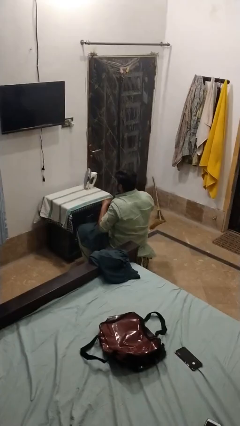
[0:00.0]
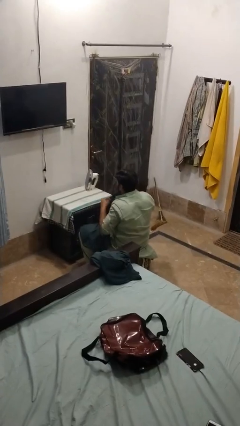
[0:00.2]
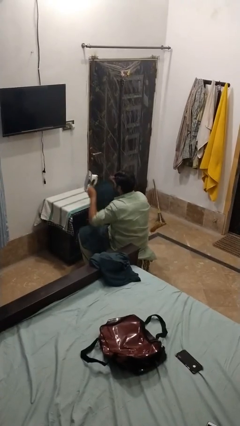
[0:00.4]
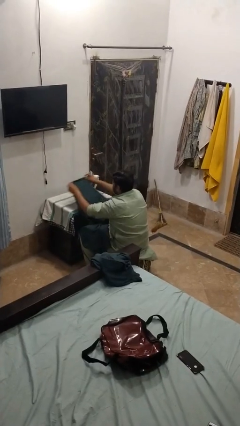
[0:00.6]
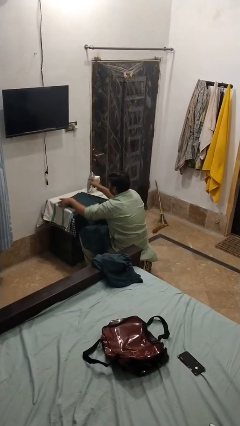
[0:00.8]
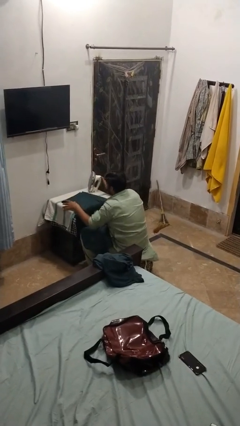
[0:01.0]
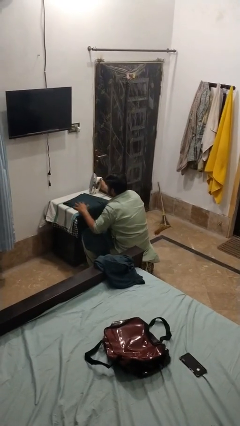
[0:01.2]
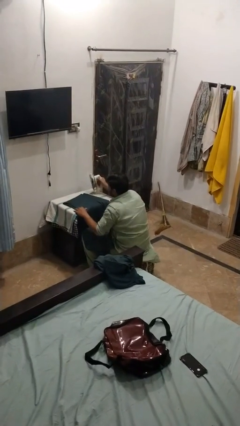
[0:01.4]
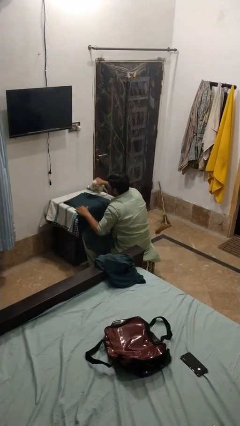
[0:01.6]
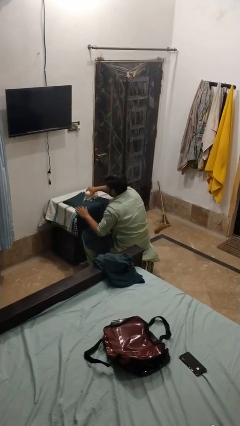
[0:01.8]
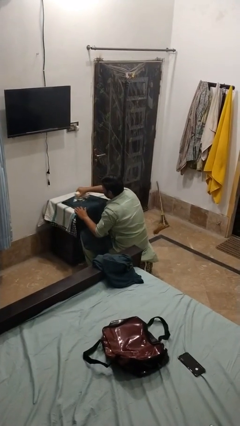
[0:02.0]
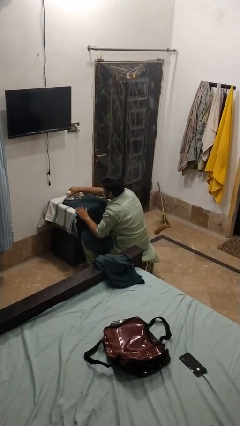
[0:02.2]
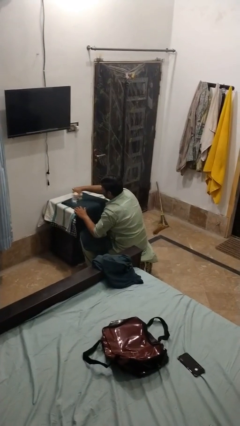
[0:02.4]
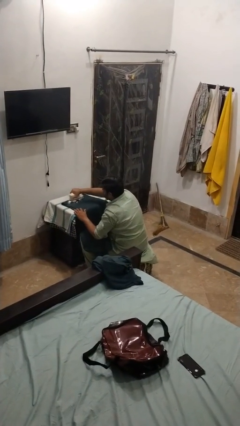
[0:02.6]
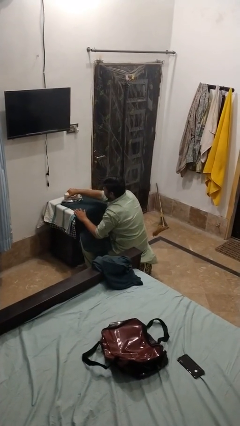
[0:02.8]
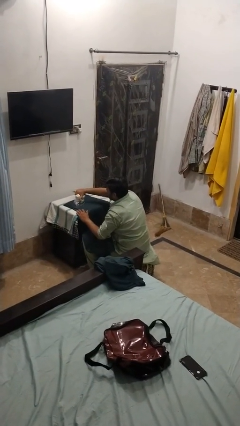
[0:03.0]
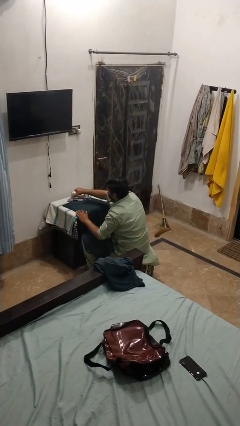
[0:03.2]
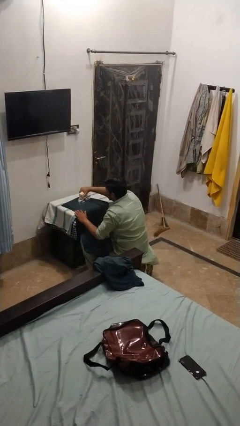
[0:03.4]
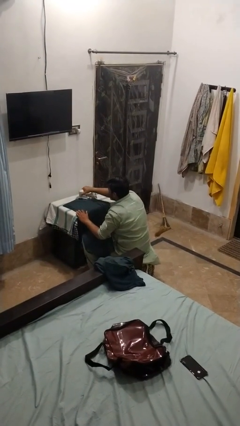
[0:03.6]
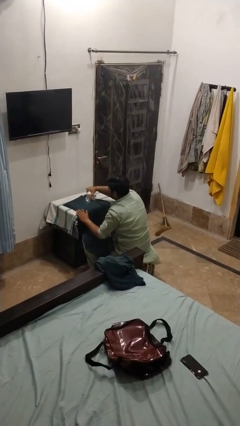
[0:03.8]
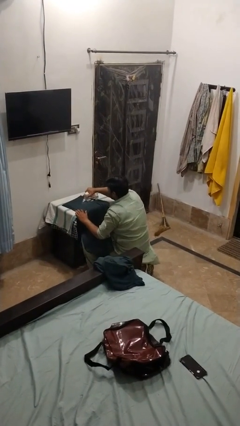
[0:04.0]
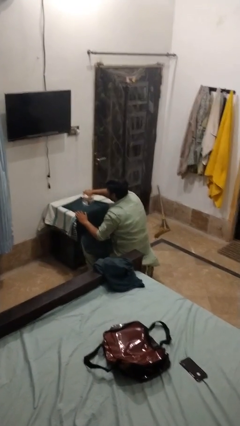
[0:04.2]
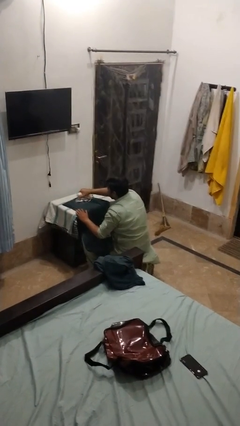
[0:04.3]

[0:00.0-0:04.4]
person irons clothes

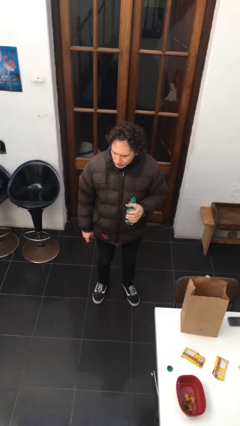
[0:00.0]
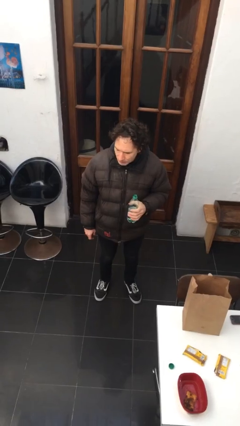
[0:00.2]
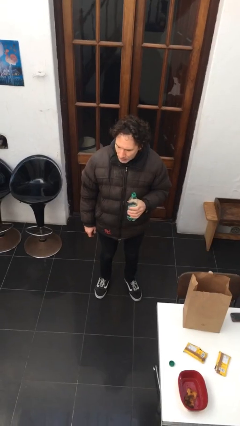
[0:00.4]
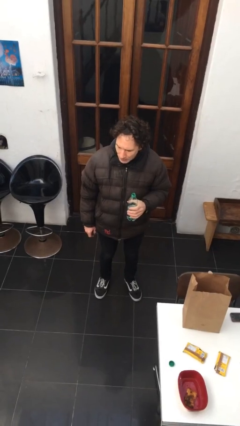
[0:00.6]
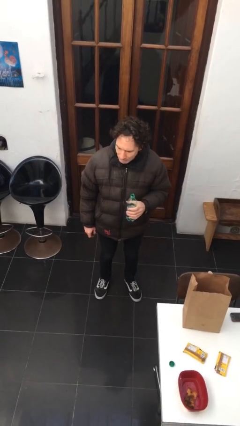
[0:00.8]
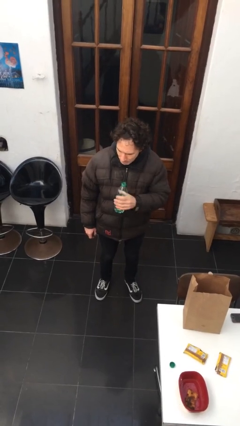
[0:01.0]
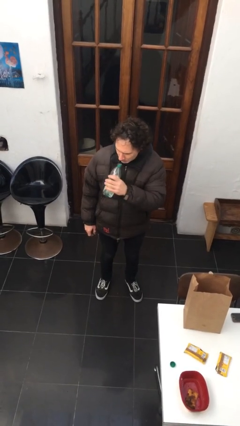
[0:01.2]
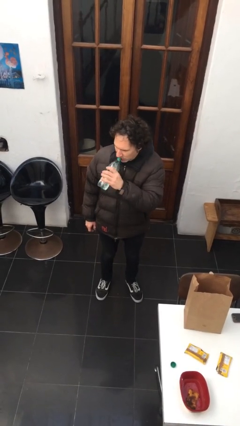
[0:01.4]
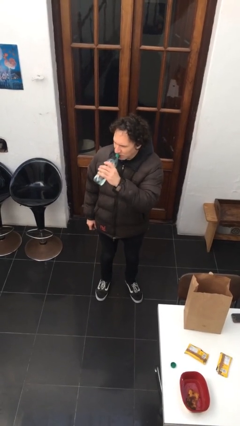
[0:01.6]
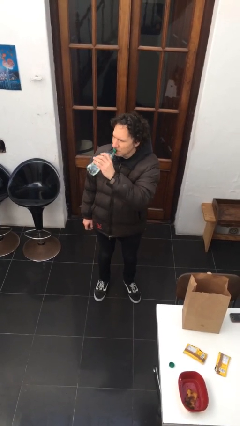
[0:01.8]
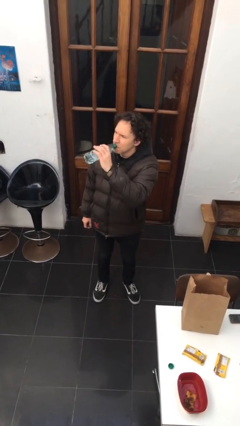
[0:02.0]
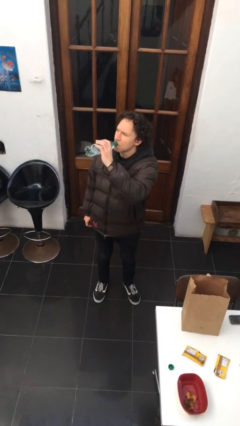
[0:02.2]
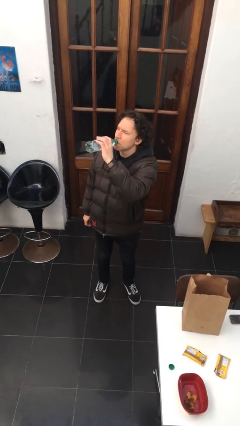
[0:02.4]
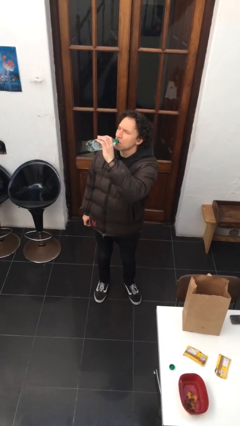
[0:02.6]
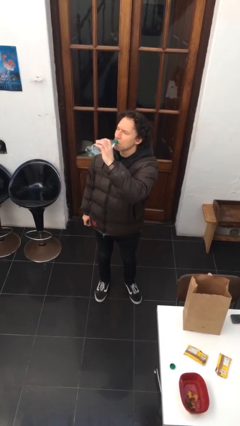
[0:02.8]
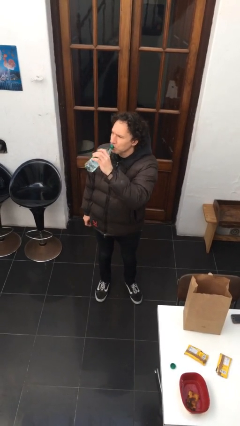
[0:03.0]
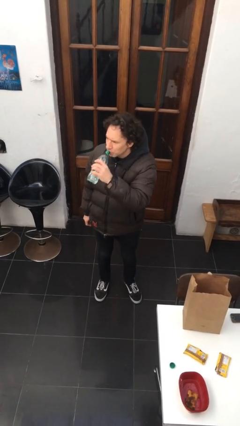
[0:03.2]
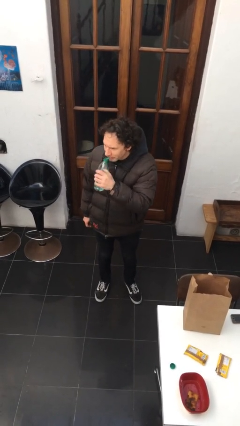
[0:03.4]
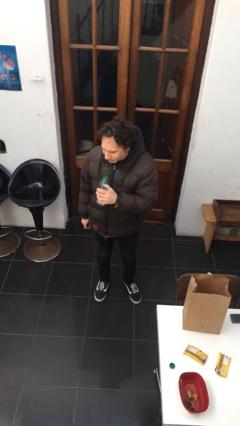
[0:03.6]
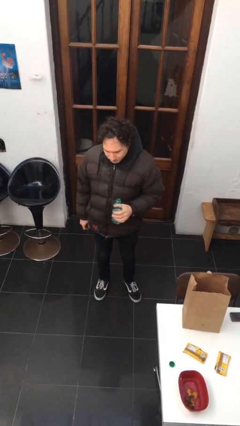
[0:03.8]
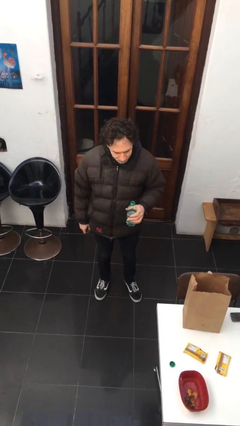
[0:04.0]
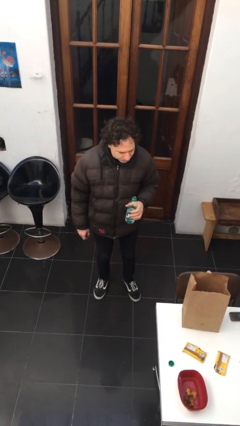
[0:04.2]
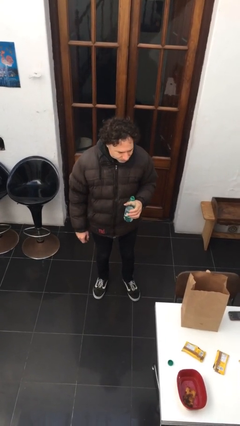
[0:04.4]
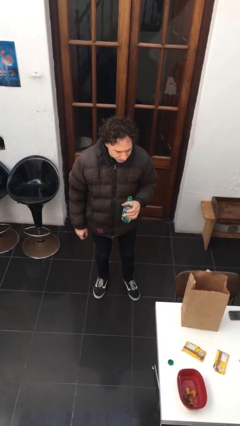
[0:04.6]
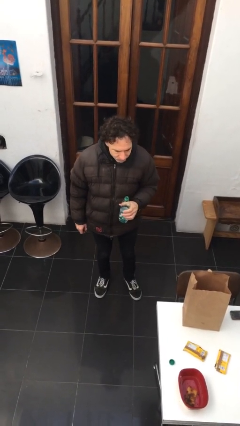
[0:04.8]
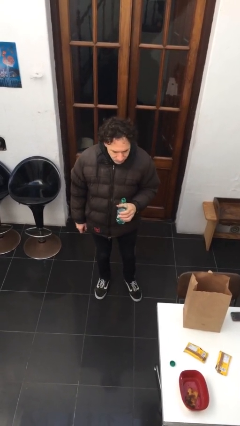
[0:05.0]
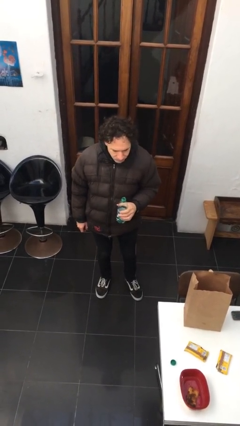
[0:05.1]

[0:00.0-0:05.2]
person drinks from bottle

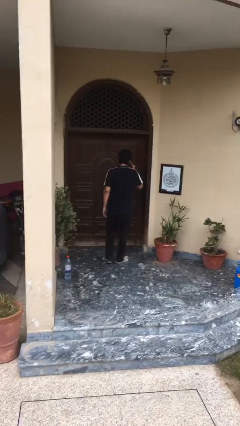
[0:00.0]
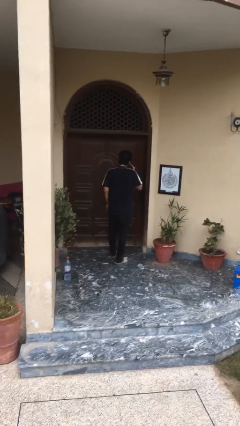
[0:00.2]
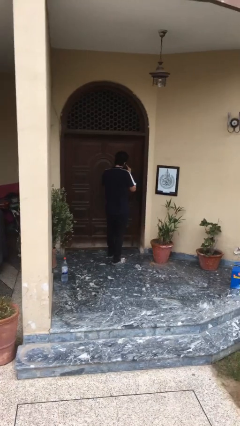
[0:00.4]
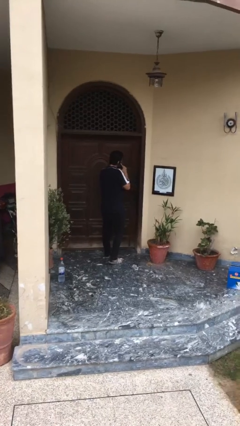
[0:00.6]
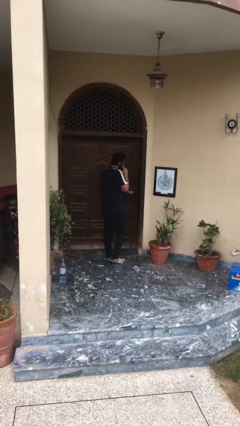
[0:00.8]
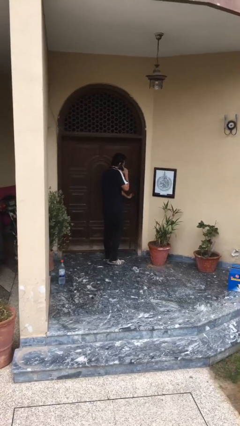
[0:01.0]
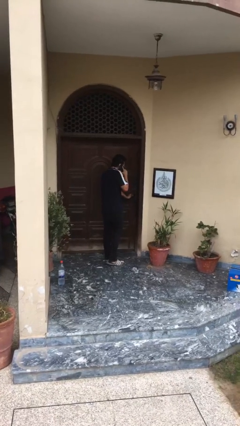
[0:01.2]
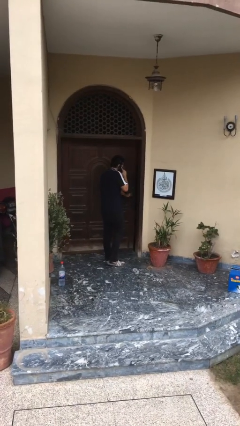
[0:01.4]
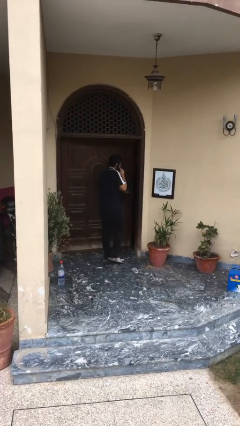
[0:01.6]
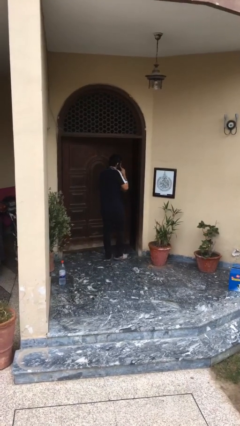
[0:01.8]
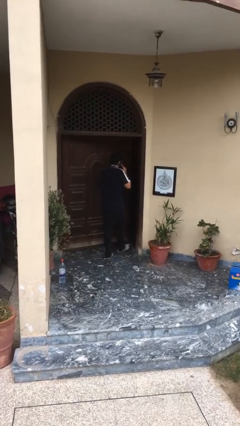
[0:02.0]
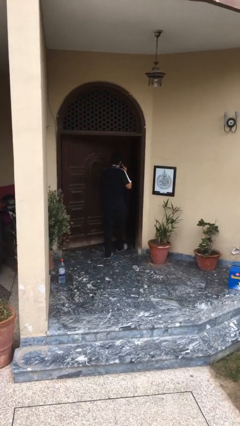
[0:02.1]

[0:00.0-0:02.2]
person opens facility door

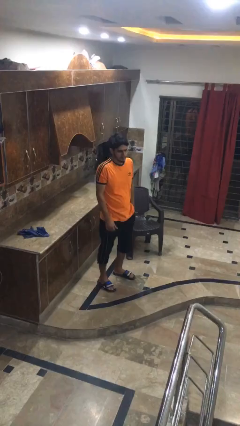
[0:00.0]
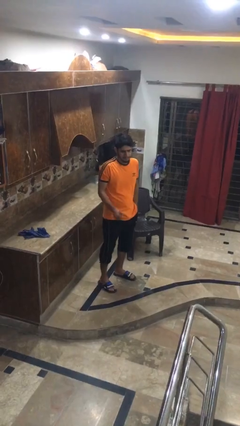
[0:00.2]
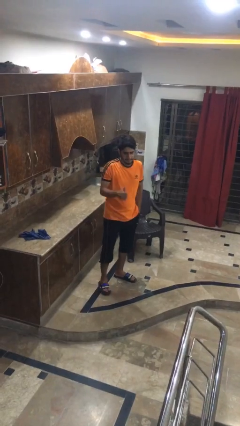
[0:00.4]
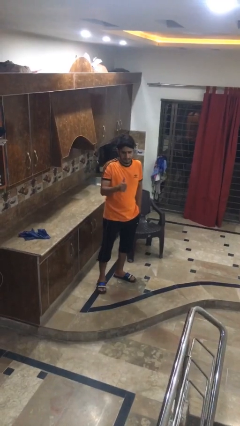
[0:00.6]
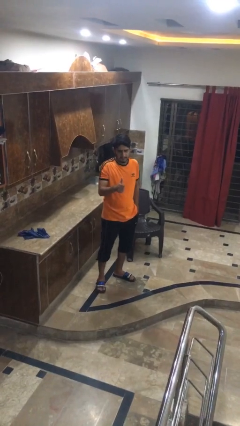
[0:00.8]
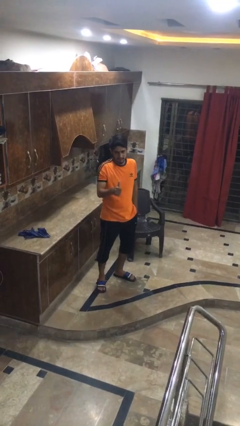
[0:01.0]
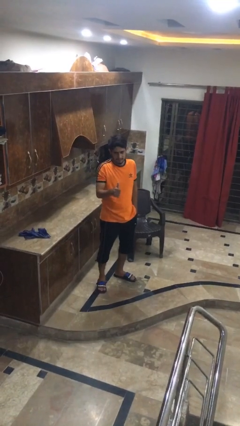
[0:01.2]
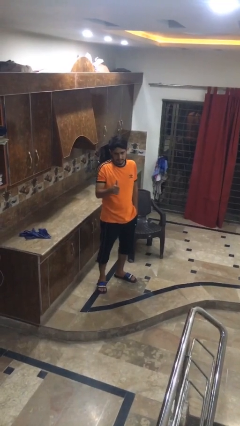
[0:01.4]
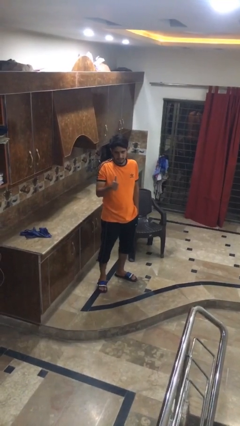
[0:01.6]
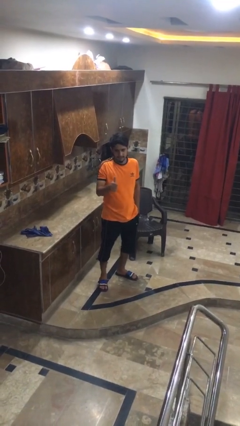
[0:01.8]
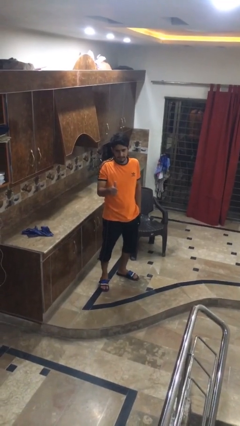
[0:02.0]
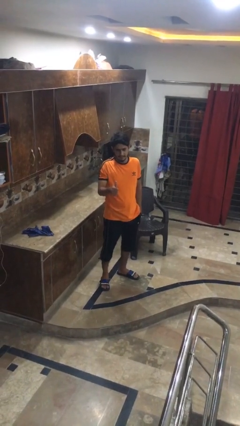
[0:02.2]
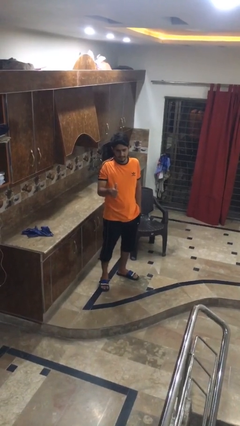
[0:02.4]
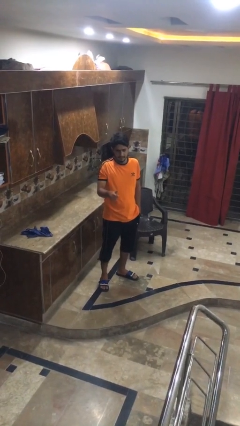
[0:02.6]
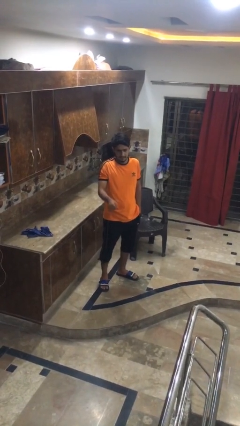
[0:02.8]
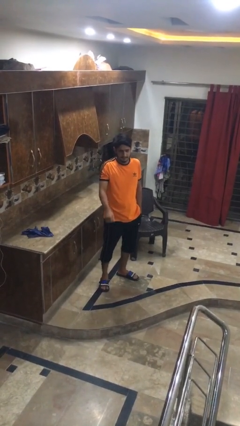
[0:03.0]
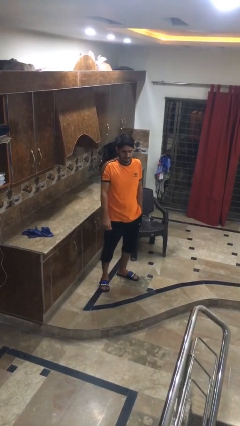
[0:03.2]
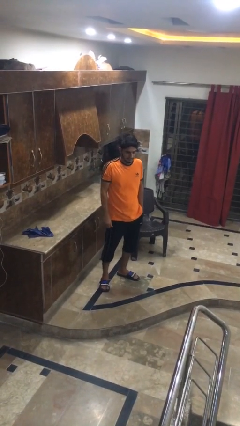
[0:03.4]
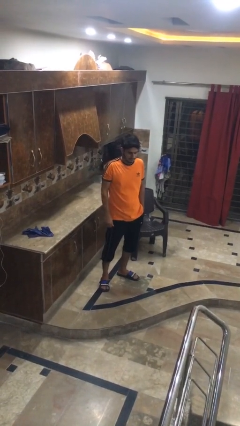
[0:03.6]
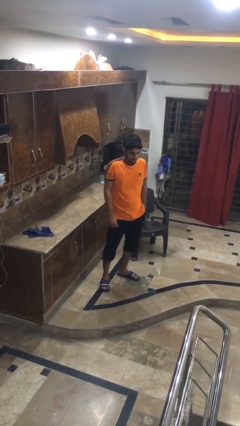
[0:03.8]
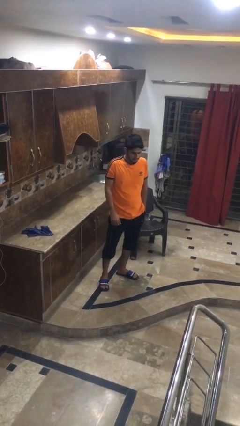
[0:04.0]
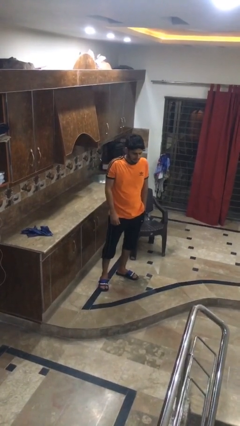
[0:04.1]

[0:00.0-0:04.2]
person gestures thumbs up

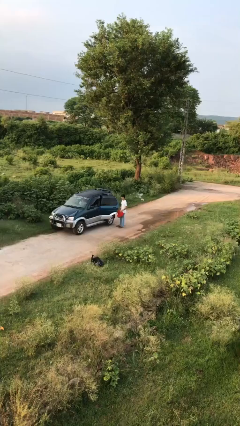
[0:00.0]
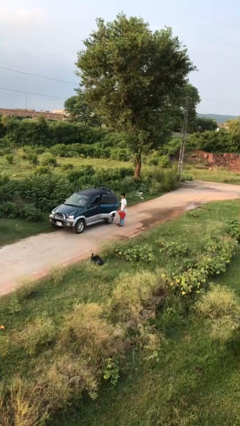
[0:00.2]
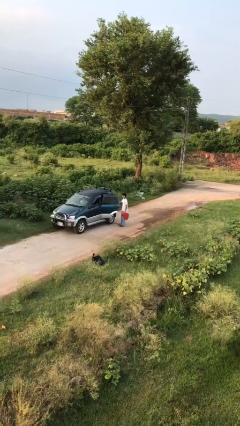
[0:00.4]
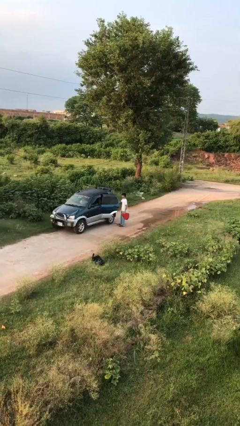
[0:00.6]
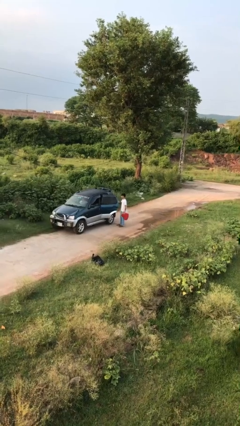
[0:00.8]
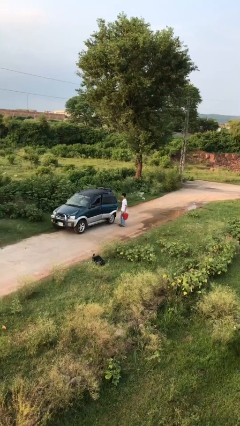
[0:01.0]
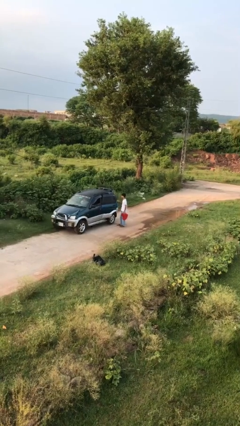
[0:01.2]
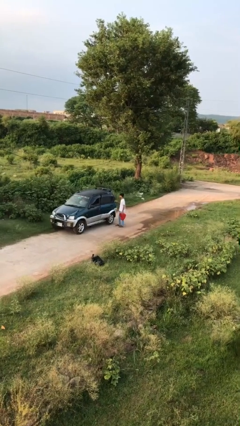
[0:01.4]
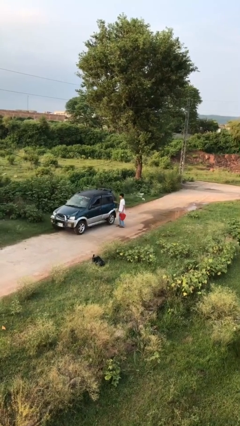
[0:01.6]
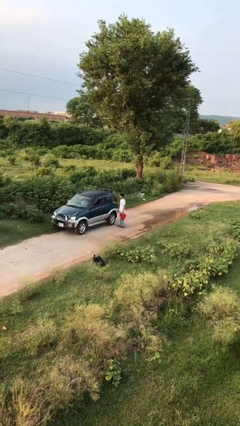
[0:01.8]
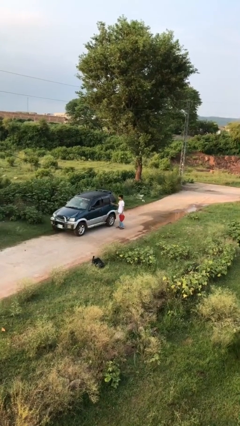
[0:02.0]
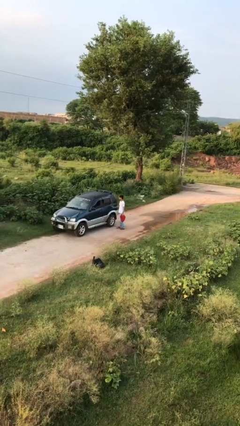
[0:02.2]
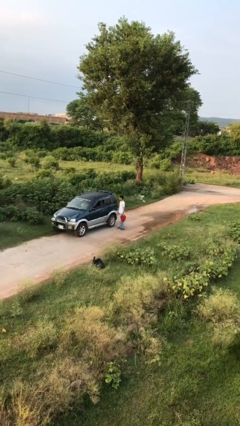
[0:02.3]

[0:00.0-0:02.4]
person closes car door
